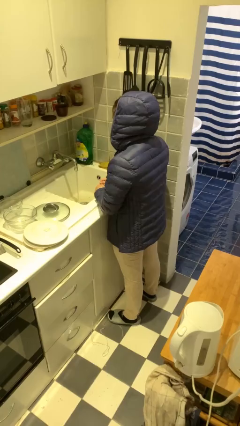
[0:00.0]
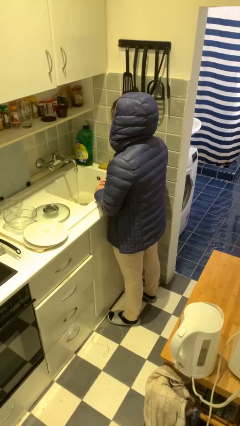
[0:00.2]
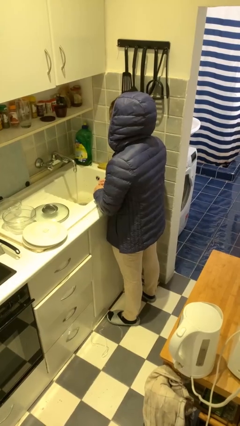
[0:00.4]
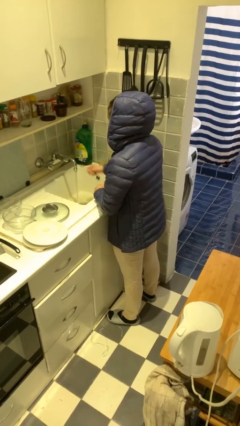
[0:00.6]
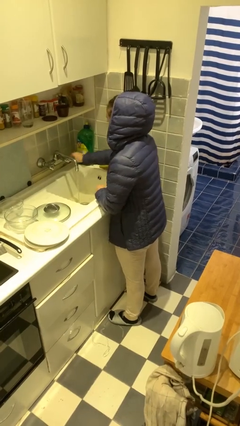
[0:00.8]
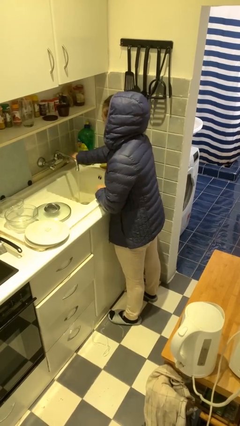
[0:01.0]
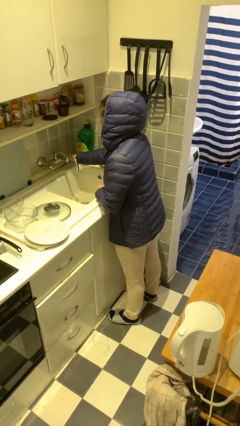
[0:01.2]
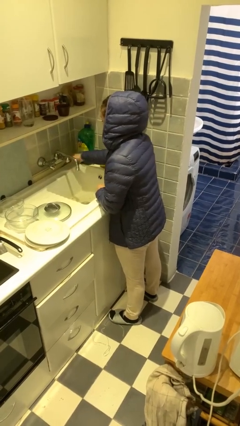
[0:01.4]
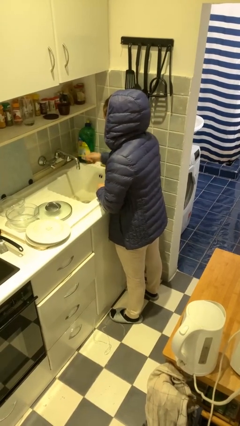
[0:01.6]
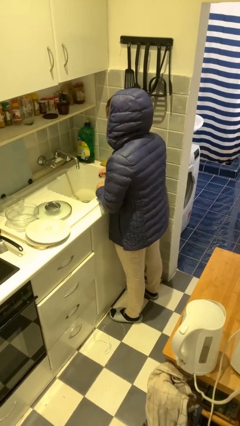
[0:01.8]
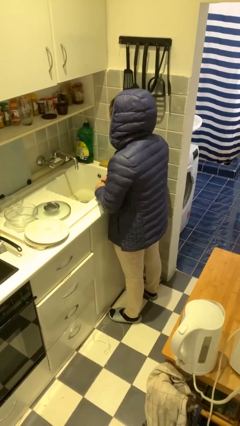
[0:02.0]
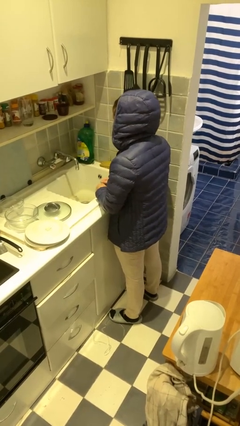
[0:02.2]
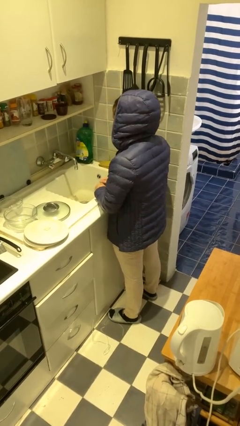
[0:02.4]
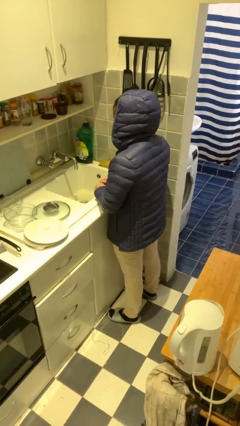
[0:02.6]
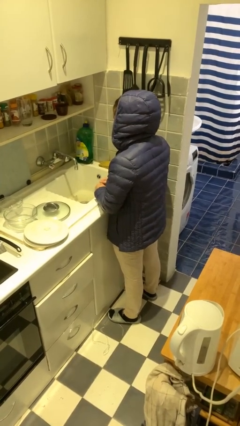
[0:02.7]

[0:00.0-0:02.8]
person turns off faucet

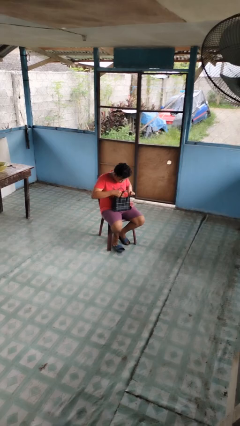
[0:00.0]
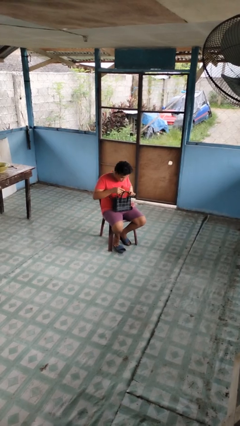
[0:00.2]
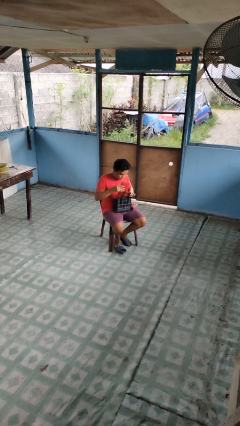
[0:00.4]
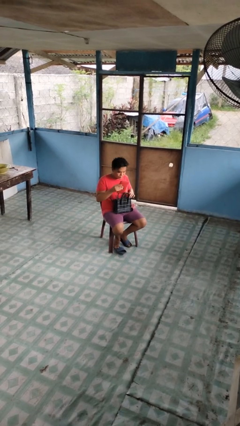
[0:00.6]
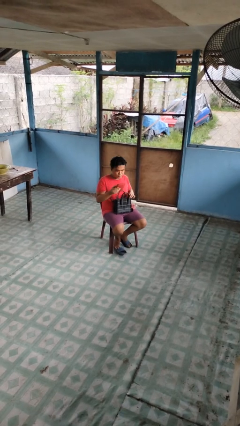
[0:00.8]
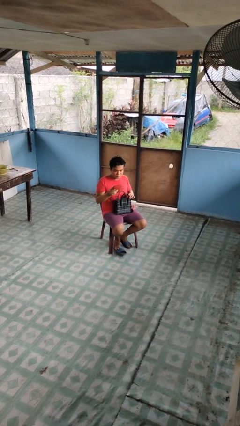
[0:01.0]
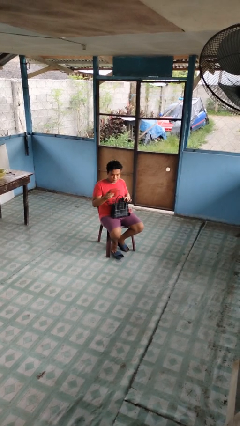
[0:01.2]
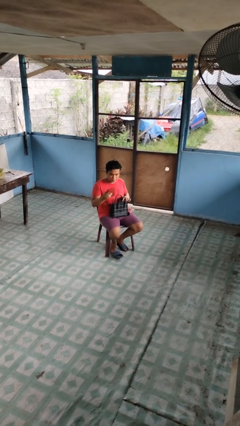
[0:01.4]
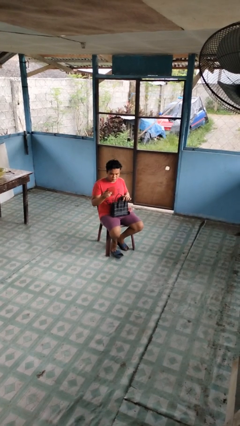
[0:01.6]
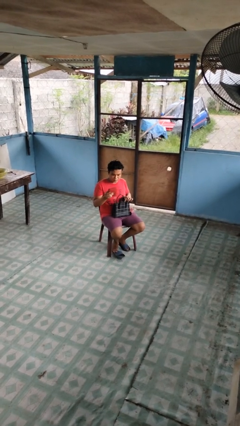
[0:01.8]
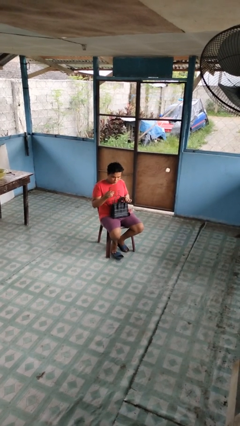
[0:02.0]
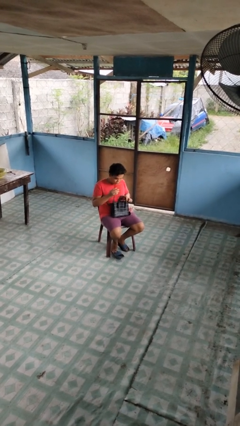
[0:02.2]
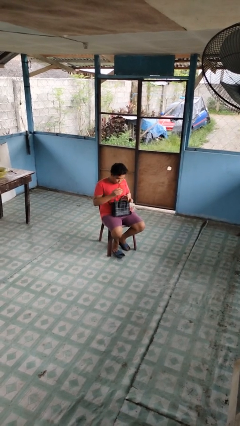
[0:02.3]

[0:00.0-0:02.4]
person takes object from purse

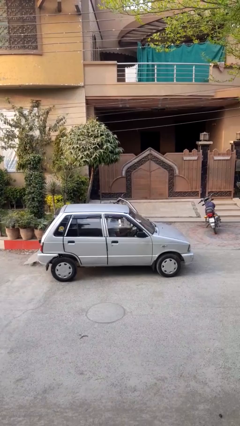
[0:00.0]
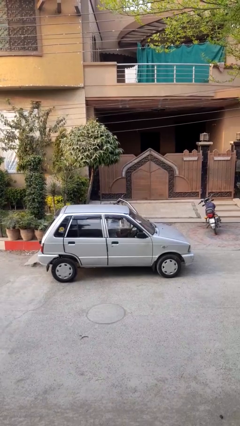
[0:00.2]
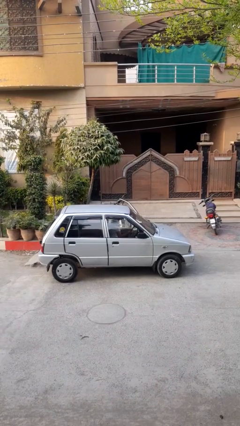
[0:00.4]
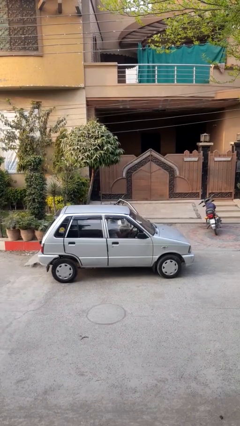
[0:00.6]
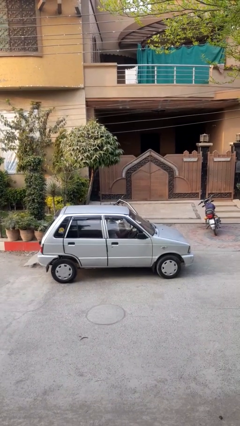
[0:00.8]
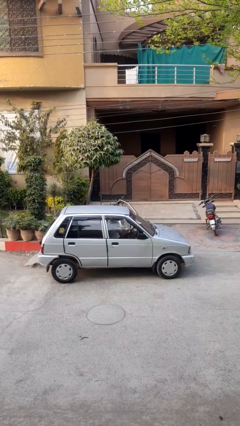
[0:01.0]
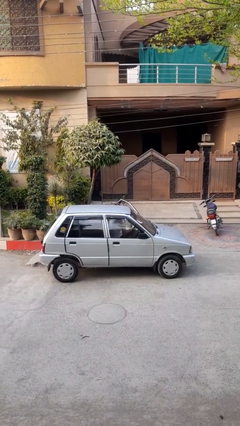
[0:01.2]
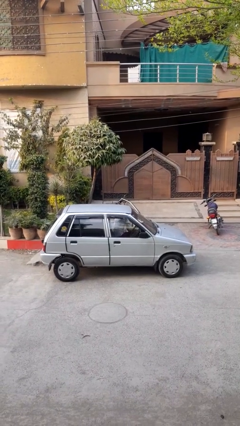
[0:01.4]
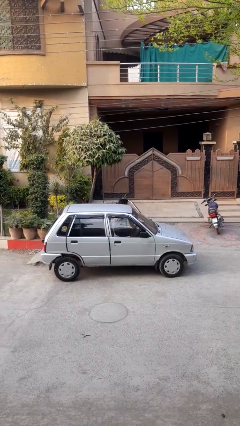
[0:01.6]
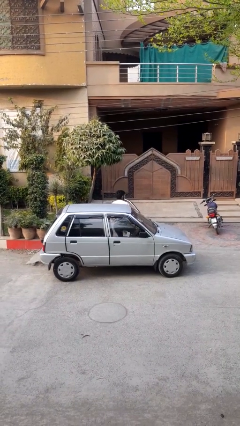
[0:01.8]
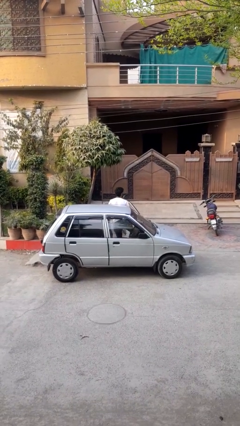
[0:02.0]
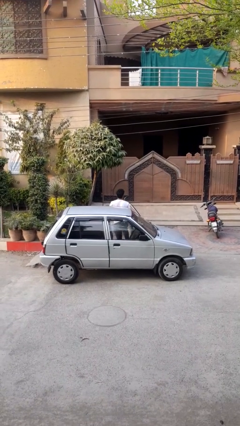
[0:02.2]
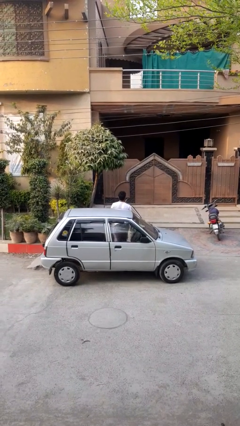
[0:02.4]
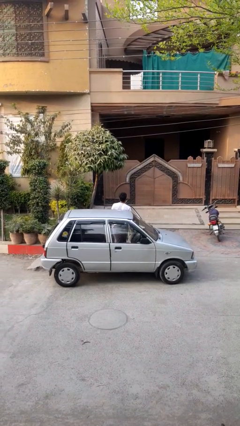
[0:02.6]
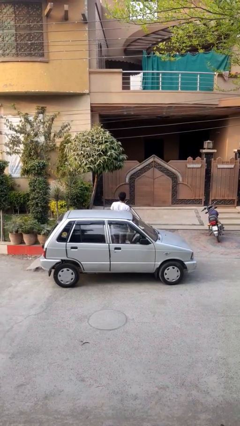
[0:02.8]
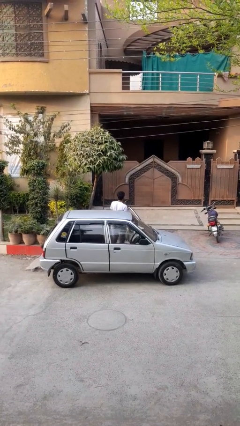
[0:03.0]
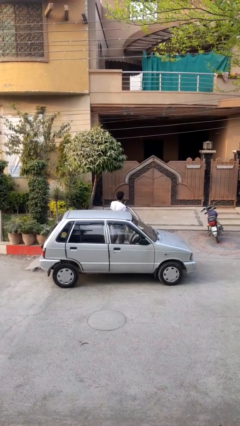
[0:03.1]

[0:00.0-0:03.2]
person exits car

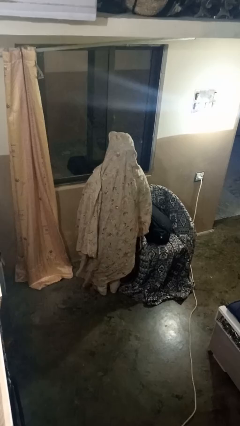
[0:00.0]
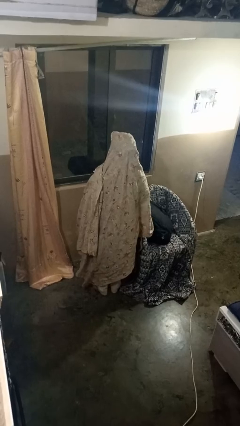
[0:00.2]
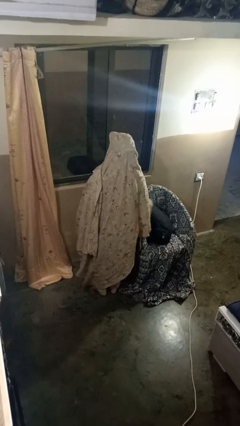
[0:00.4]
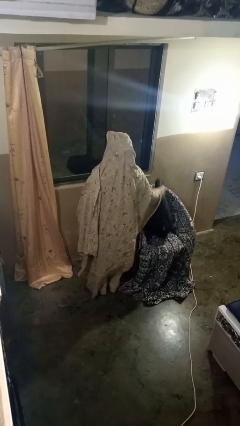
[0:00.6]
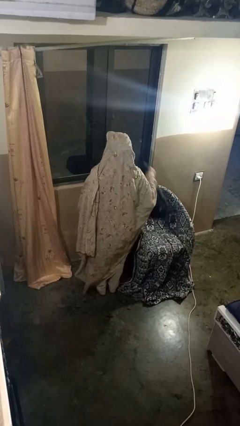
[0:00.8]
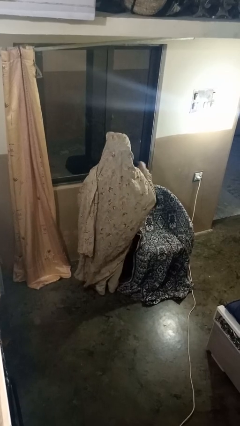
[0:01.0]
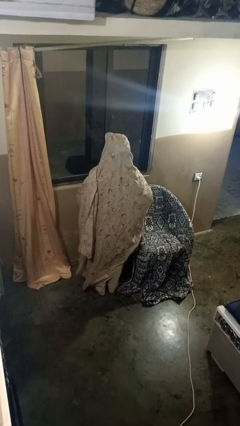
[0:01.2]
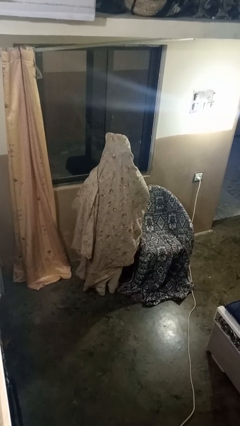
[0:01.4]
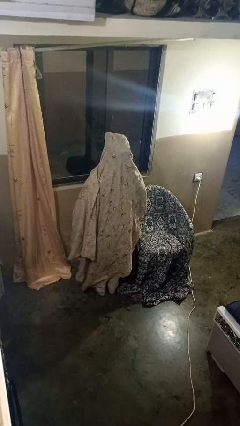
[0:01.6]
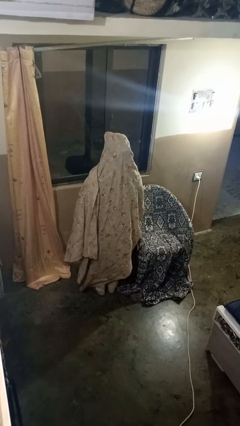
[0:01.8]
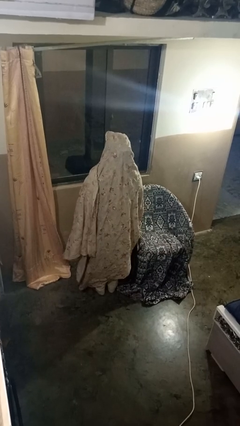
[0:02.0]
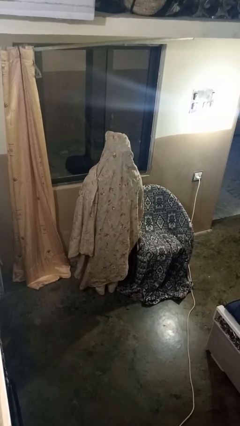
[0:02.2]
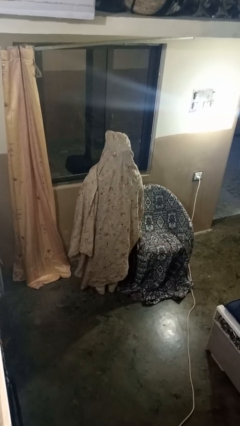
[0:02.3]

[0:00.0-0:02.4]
person picks up object from couch

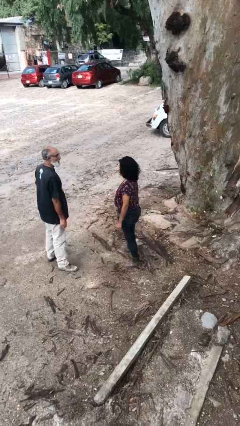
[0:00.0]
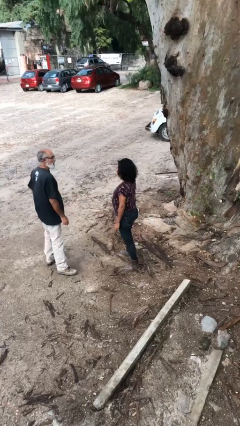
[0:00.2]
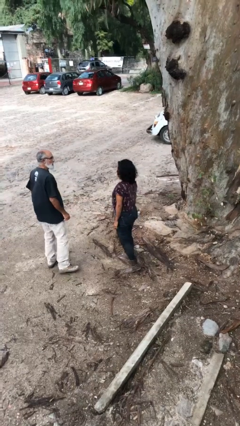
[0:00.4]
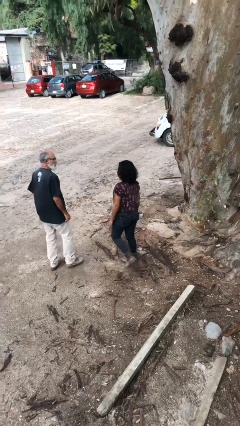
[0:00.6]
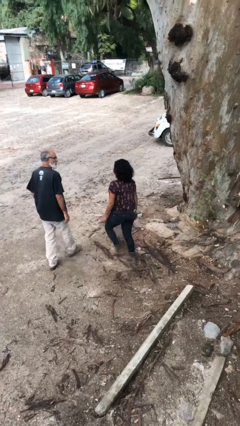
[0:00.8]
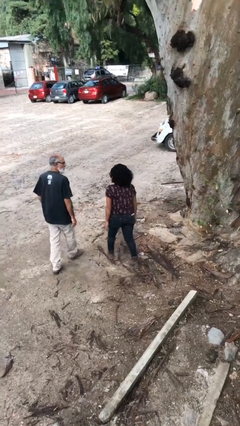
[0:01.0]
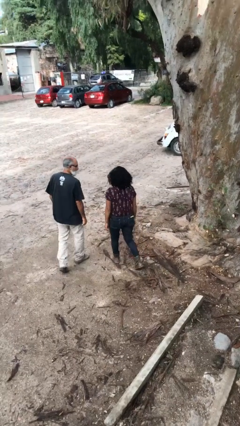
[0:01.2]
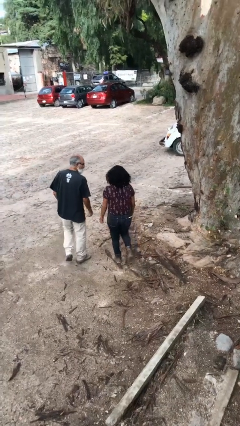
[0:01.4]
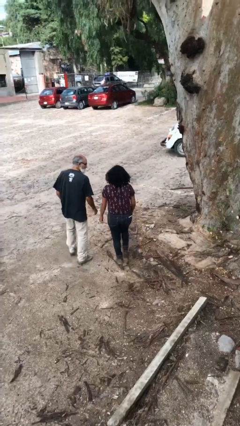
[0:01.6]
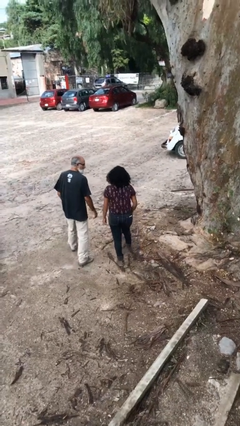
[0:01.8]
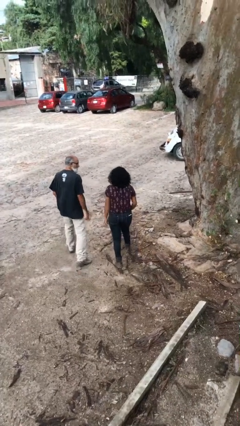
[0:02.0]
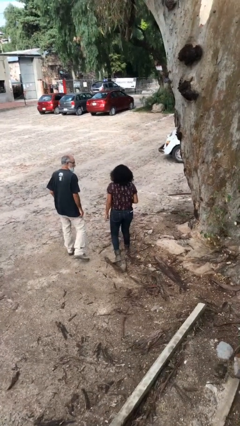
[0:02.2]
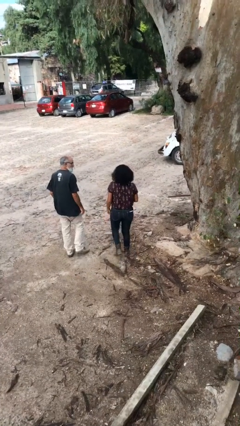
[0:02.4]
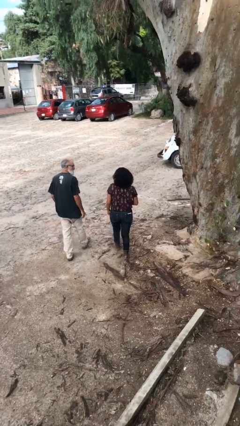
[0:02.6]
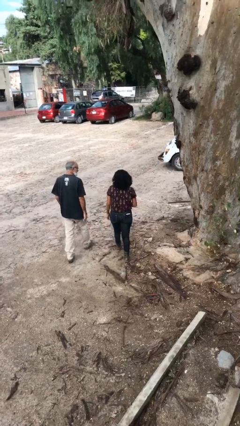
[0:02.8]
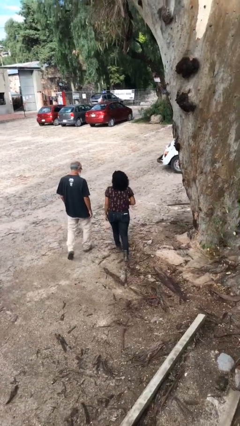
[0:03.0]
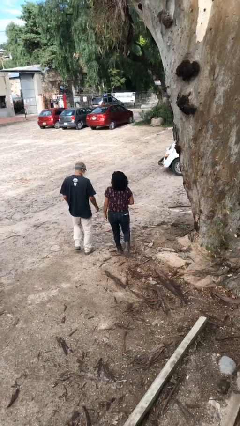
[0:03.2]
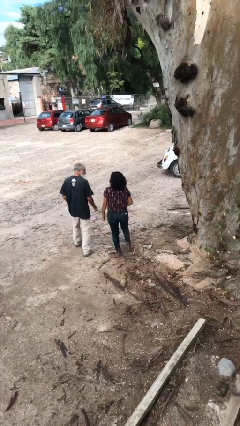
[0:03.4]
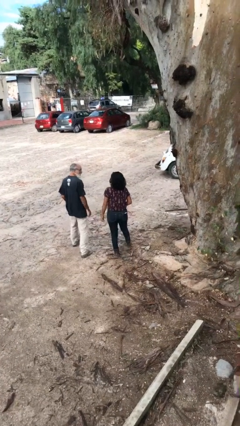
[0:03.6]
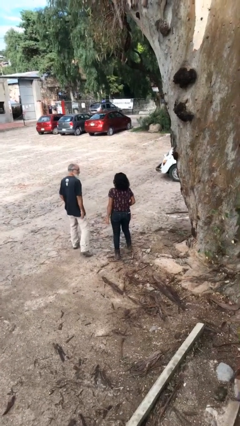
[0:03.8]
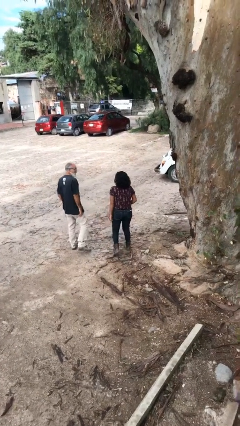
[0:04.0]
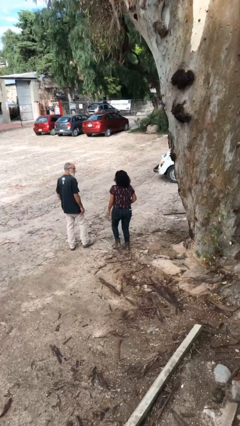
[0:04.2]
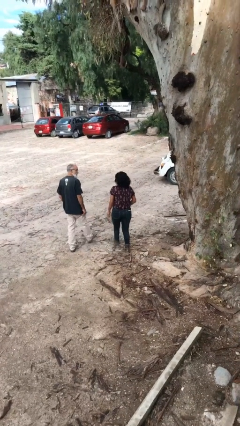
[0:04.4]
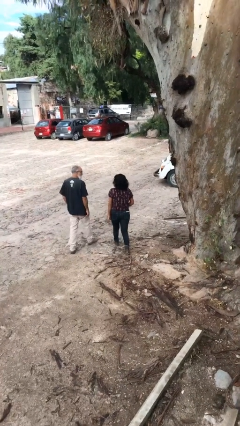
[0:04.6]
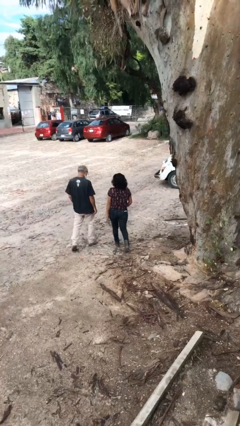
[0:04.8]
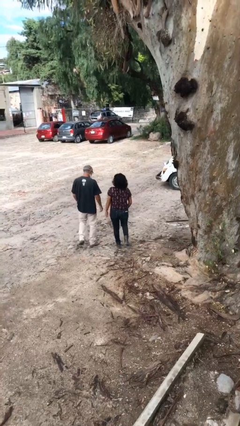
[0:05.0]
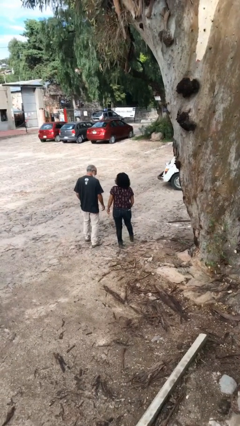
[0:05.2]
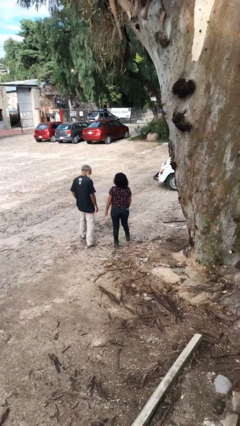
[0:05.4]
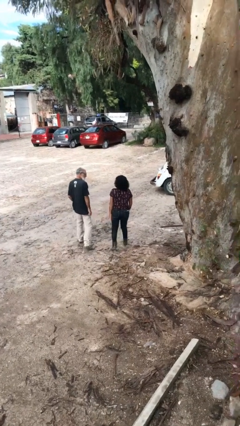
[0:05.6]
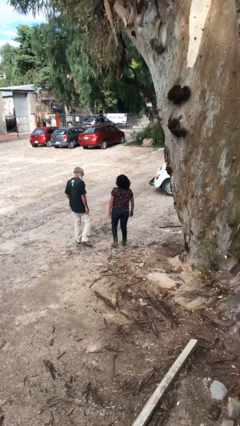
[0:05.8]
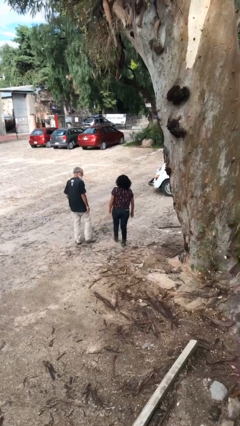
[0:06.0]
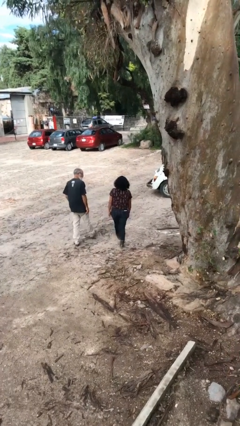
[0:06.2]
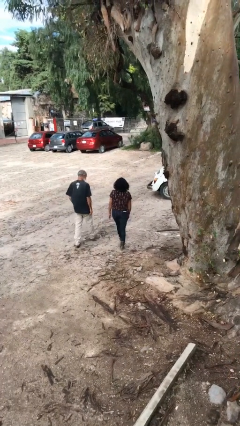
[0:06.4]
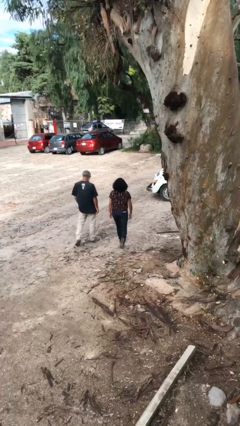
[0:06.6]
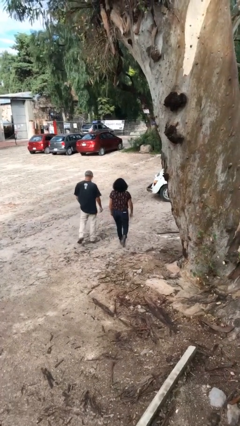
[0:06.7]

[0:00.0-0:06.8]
person talks to person
